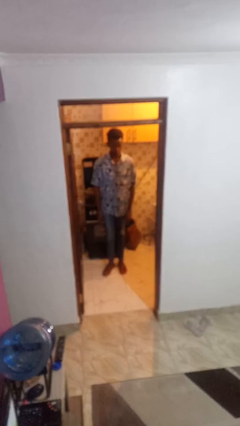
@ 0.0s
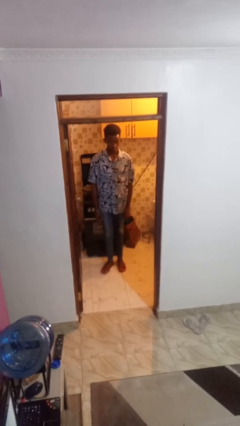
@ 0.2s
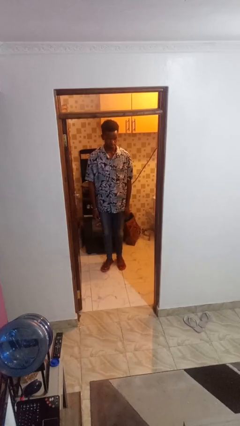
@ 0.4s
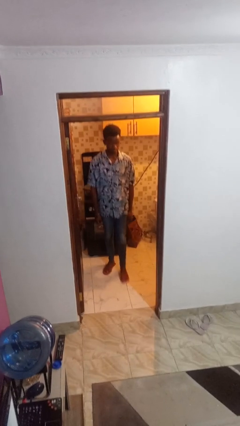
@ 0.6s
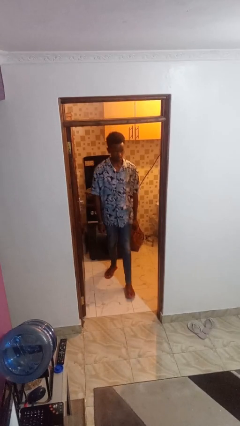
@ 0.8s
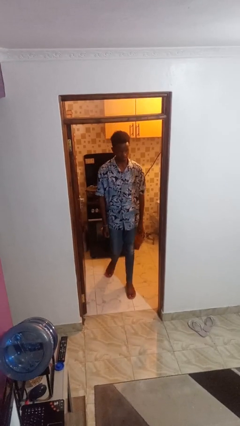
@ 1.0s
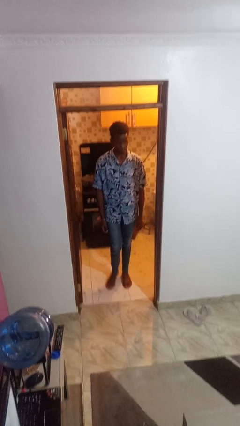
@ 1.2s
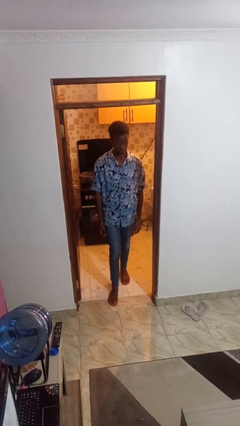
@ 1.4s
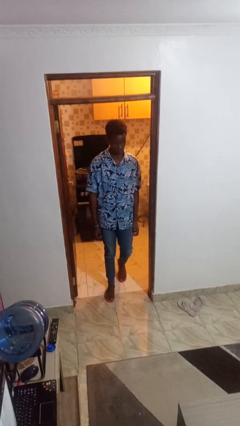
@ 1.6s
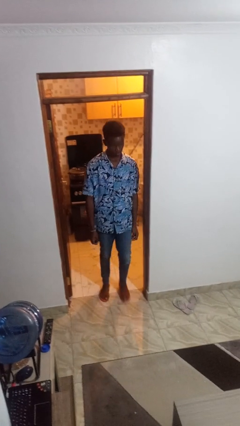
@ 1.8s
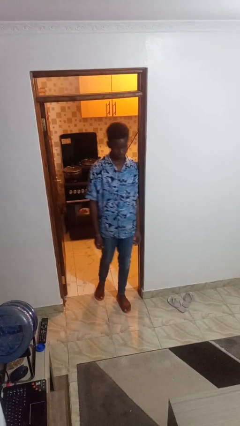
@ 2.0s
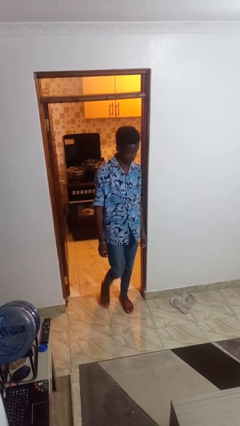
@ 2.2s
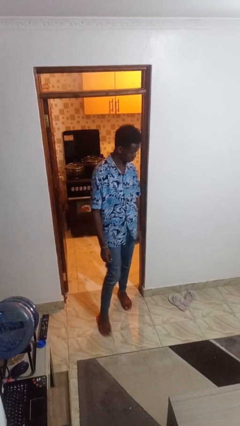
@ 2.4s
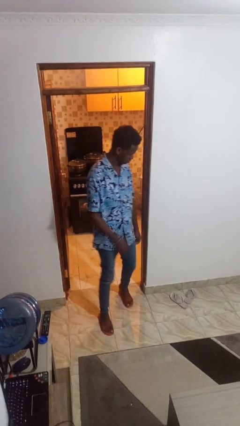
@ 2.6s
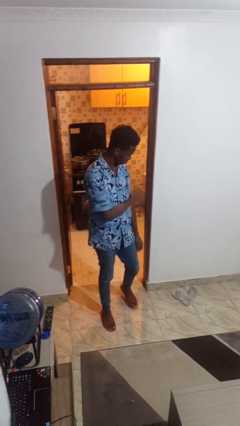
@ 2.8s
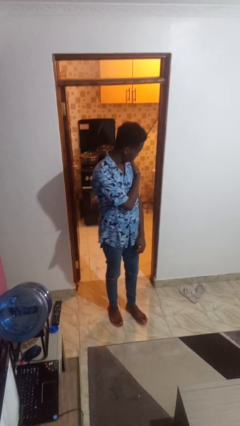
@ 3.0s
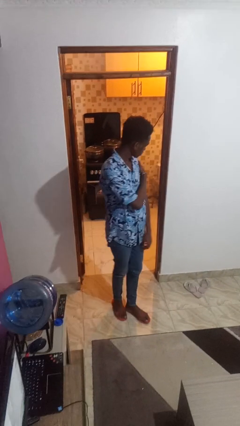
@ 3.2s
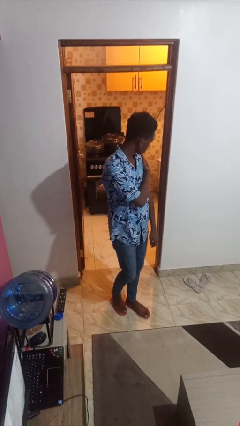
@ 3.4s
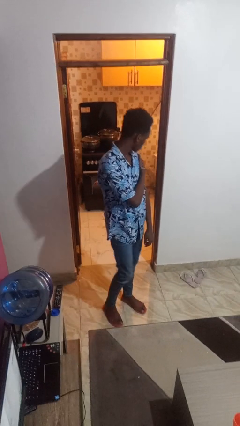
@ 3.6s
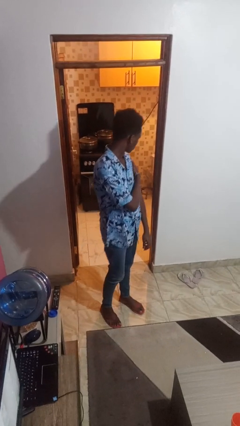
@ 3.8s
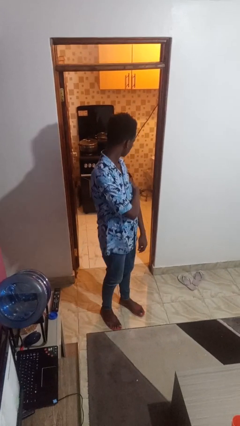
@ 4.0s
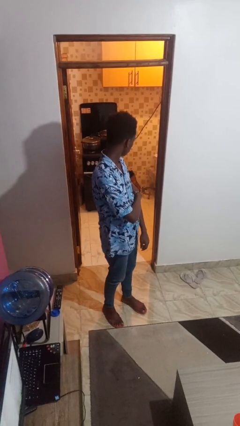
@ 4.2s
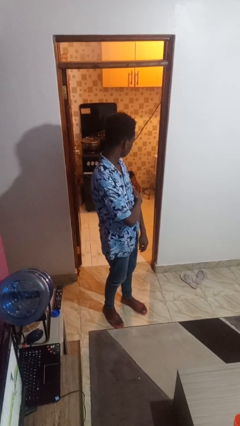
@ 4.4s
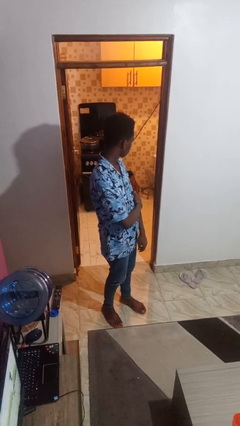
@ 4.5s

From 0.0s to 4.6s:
person bumps into wall

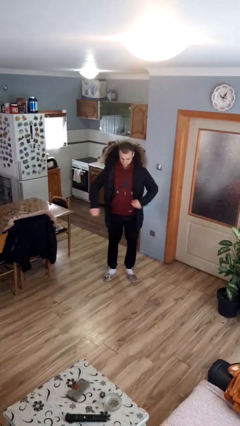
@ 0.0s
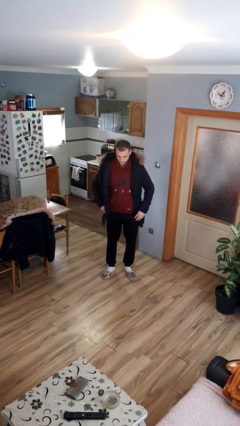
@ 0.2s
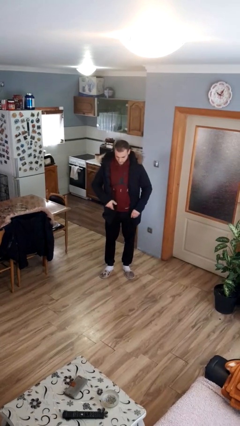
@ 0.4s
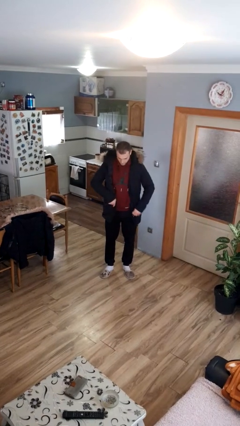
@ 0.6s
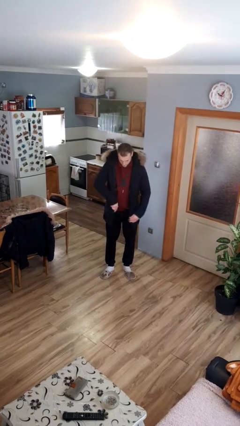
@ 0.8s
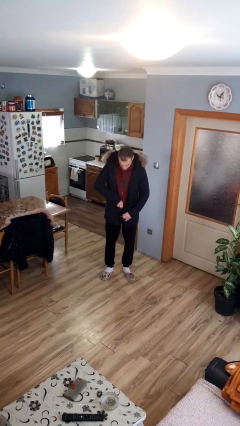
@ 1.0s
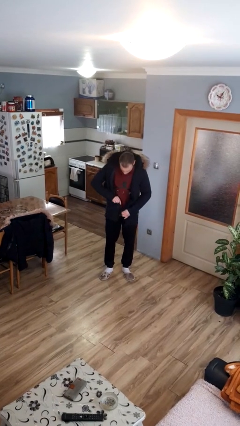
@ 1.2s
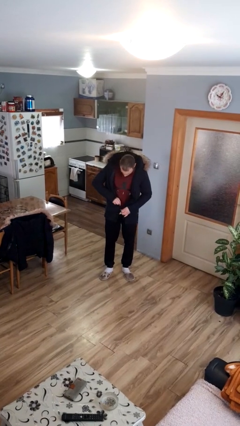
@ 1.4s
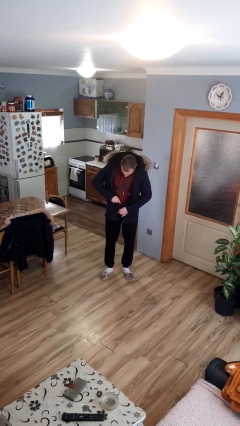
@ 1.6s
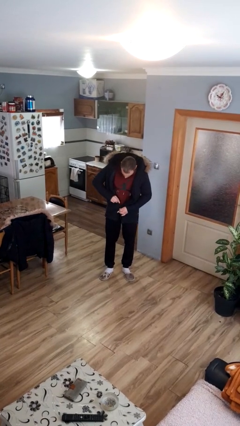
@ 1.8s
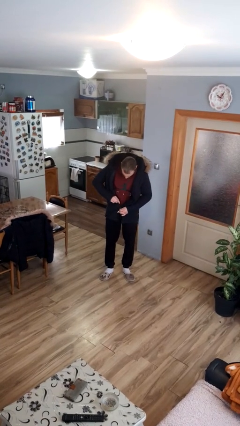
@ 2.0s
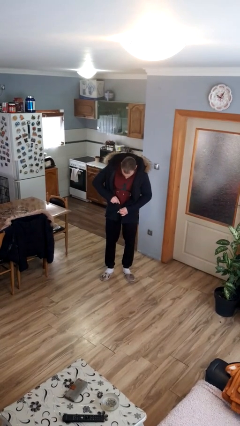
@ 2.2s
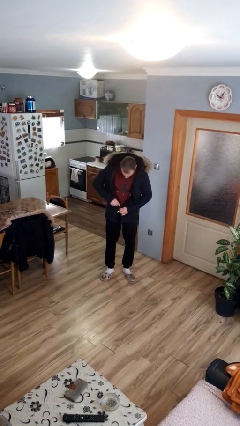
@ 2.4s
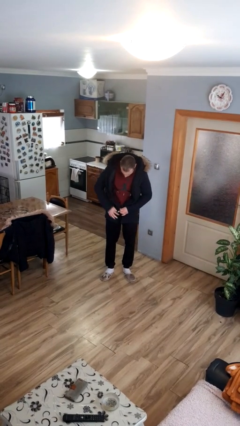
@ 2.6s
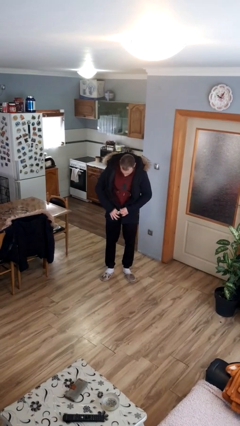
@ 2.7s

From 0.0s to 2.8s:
person puts on jacket

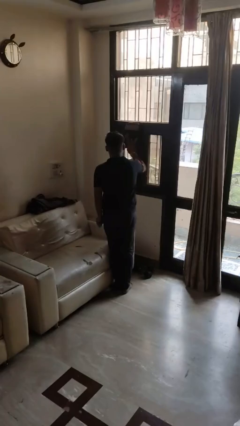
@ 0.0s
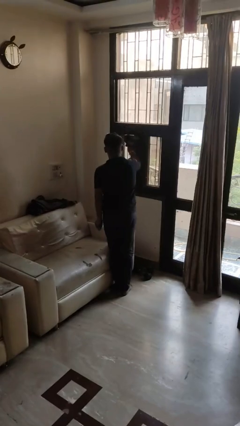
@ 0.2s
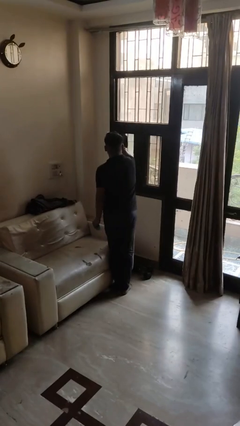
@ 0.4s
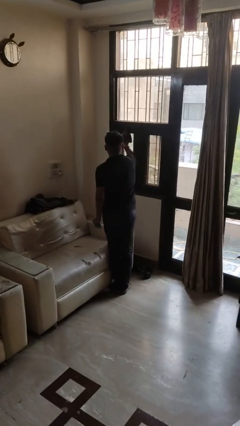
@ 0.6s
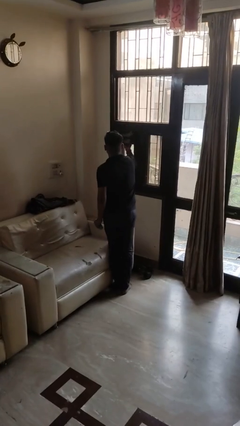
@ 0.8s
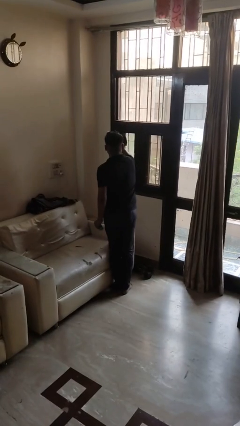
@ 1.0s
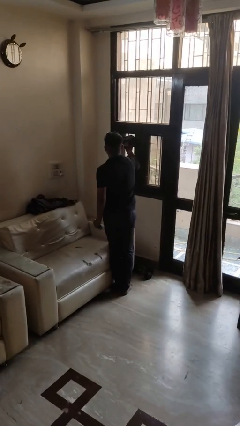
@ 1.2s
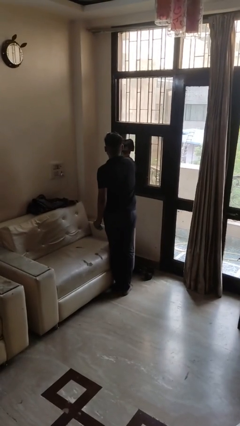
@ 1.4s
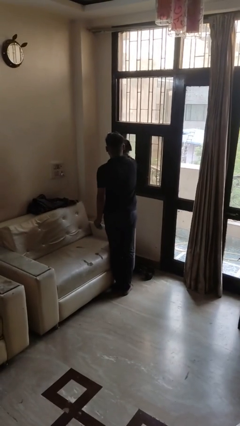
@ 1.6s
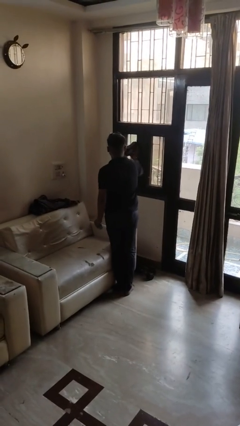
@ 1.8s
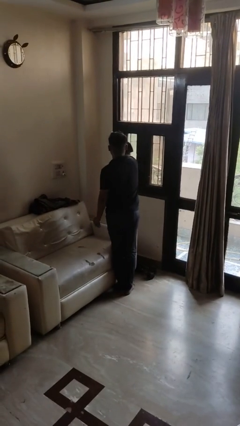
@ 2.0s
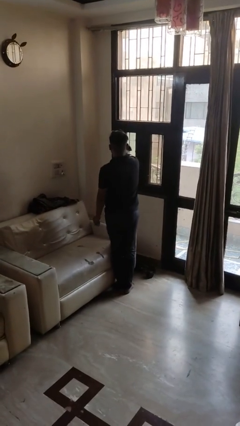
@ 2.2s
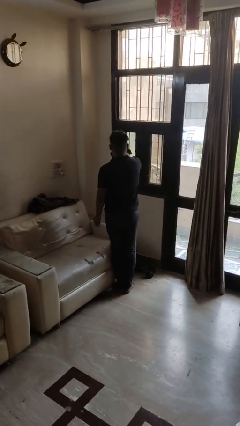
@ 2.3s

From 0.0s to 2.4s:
person washes window

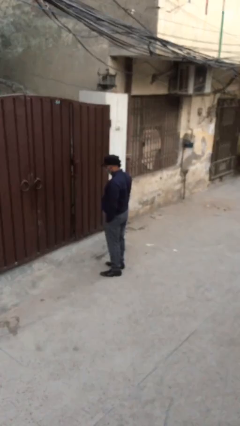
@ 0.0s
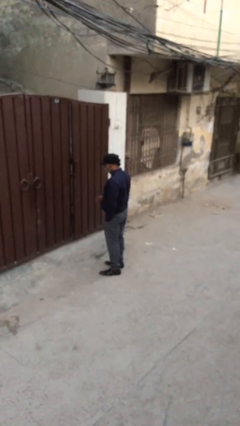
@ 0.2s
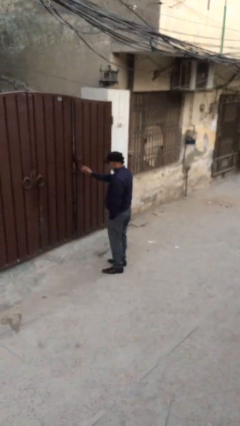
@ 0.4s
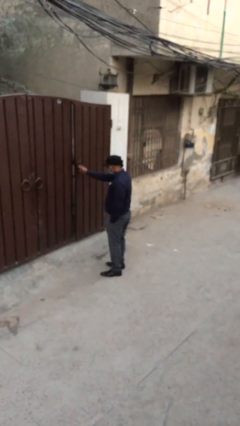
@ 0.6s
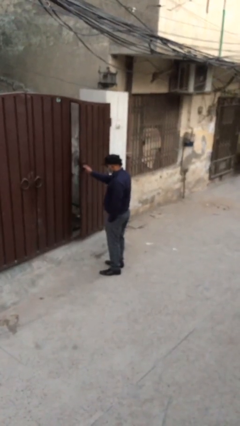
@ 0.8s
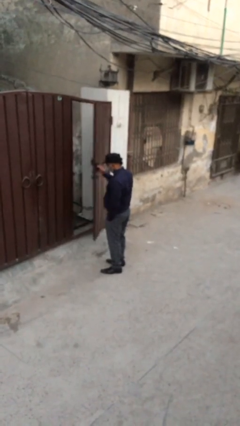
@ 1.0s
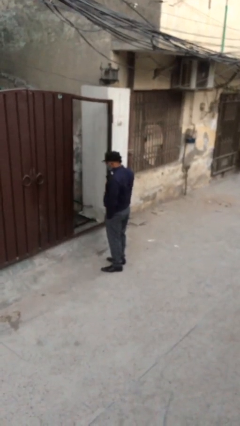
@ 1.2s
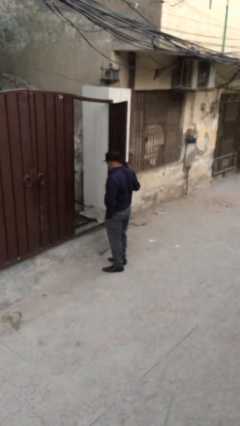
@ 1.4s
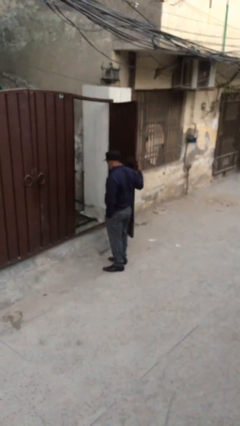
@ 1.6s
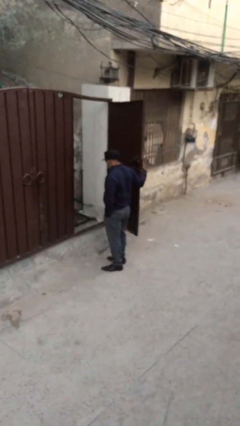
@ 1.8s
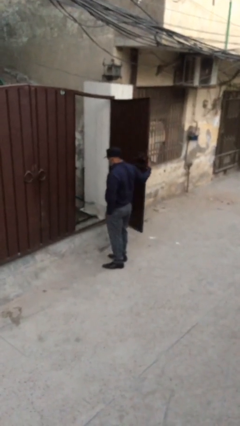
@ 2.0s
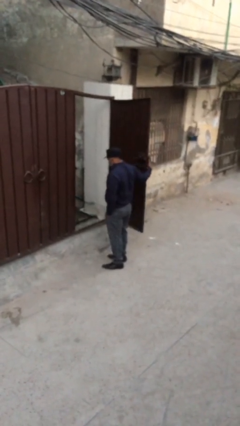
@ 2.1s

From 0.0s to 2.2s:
person opens facility door

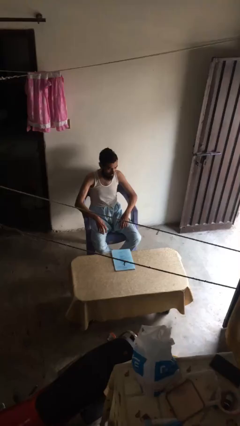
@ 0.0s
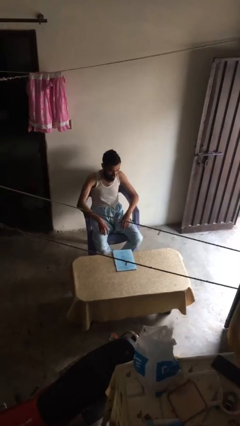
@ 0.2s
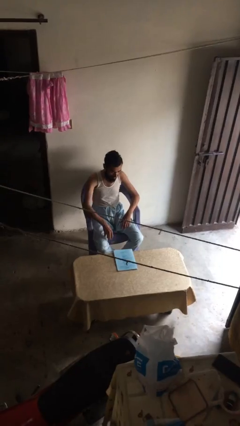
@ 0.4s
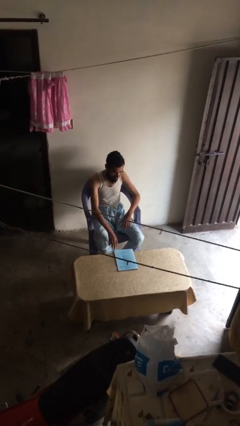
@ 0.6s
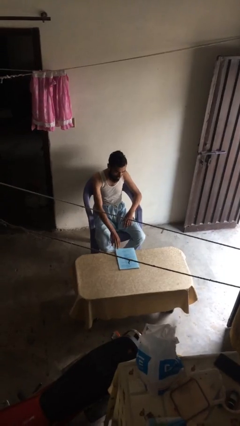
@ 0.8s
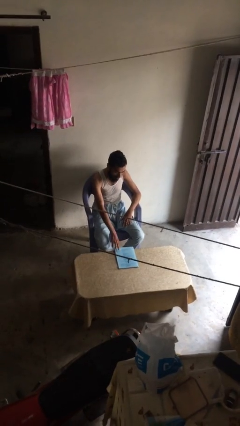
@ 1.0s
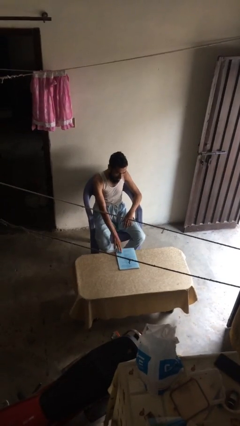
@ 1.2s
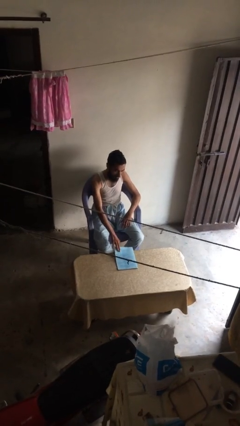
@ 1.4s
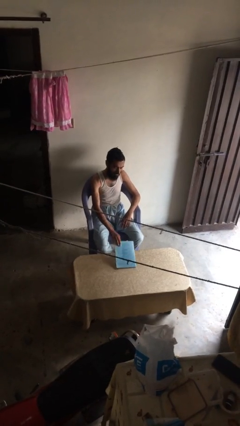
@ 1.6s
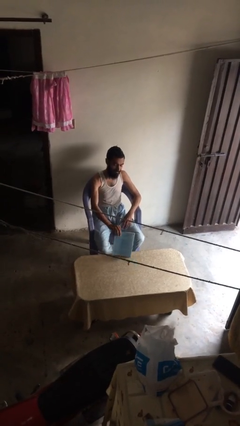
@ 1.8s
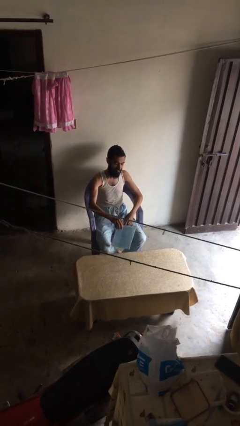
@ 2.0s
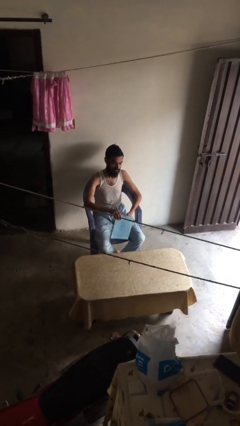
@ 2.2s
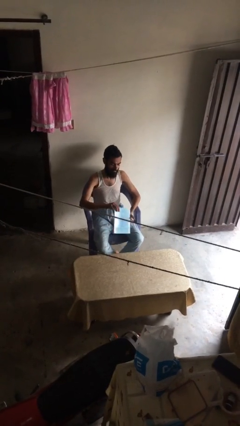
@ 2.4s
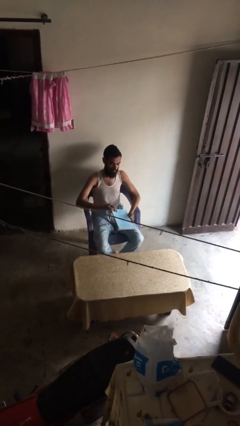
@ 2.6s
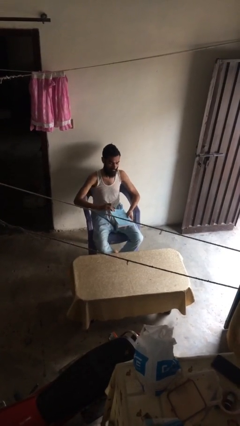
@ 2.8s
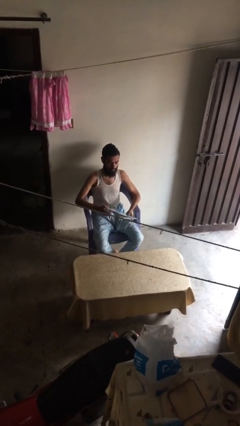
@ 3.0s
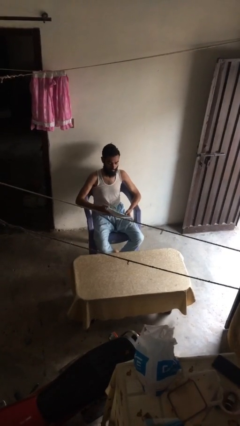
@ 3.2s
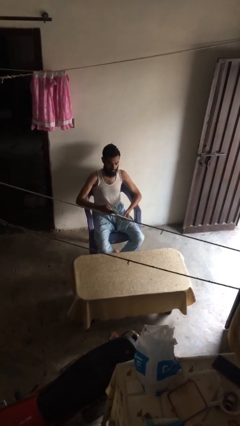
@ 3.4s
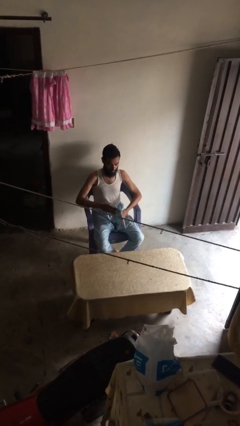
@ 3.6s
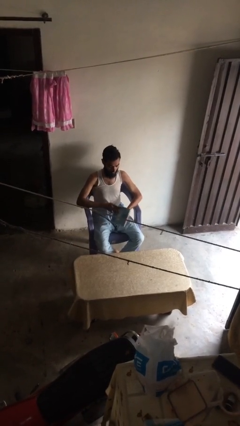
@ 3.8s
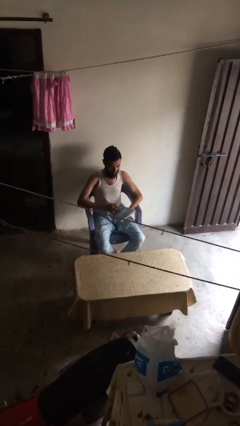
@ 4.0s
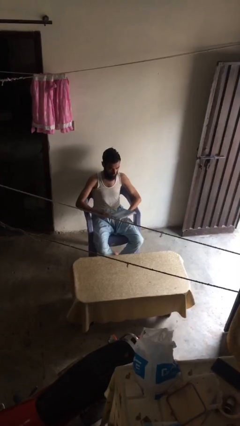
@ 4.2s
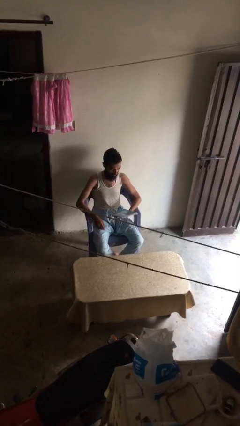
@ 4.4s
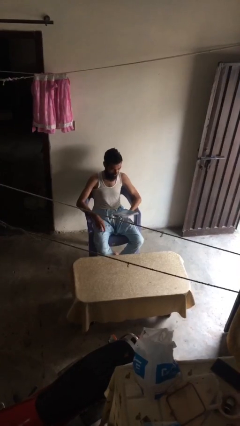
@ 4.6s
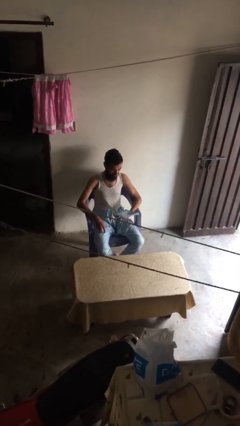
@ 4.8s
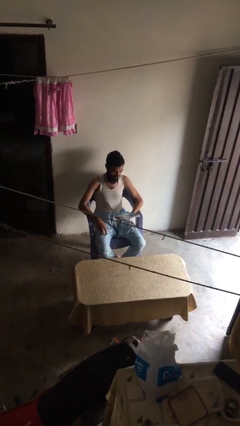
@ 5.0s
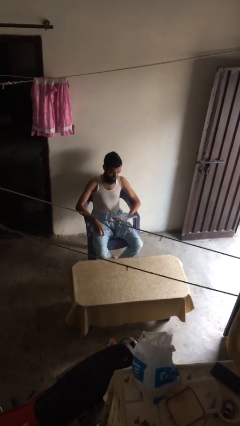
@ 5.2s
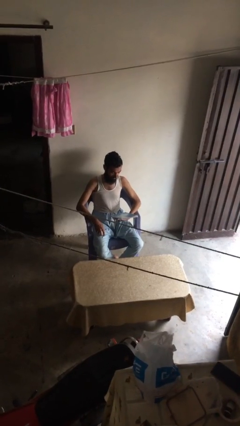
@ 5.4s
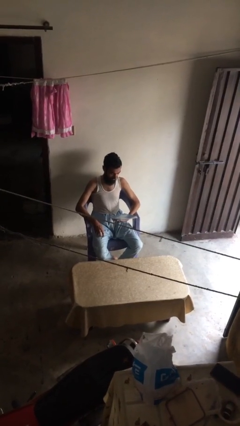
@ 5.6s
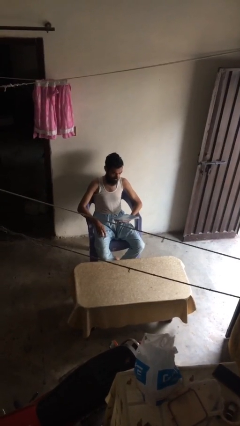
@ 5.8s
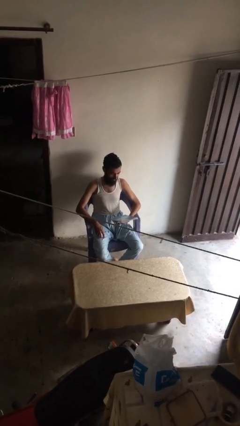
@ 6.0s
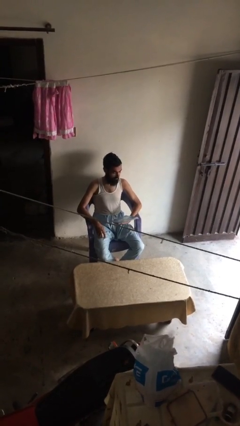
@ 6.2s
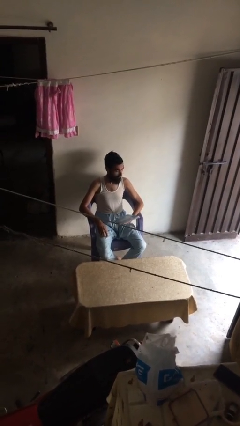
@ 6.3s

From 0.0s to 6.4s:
person picks up object from table
